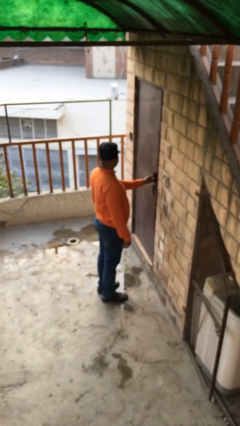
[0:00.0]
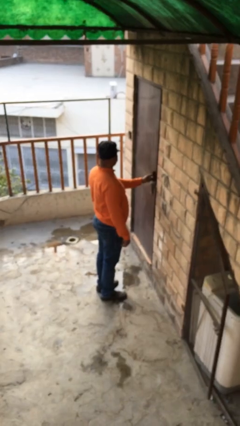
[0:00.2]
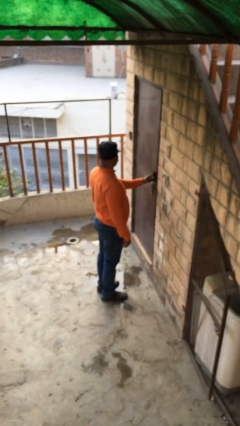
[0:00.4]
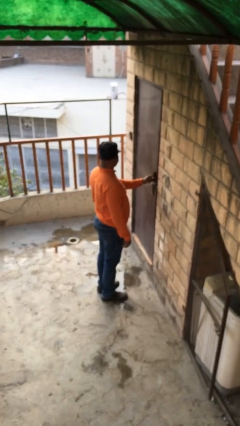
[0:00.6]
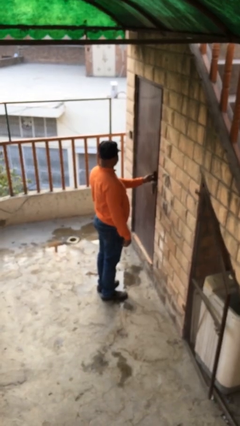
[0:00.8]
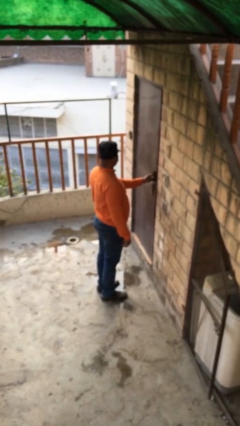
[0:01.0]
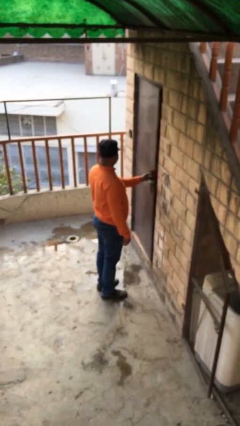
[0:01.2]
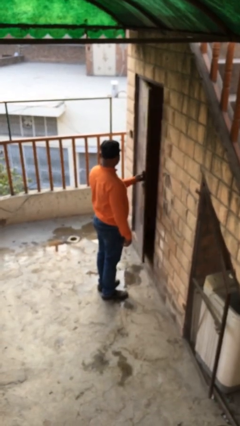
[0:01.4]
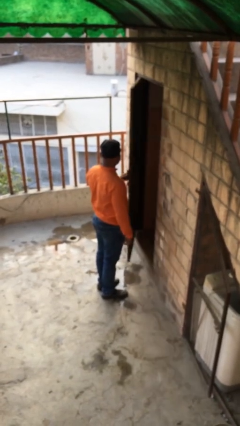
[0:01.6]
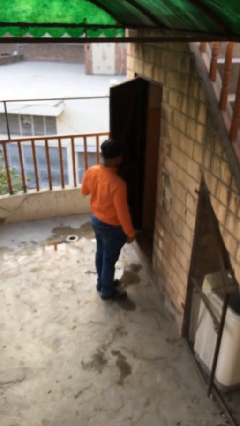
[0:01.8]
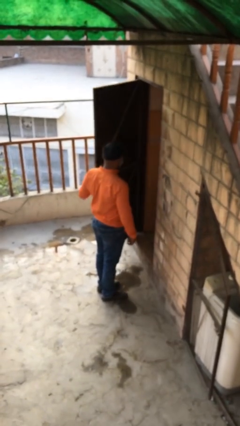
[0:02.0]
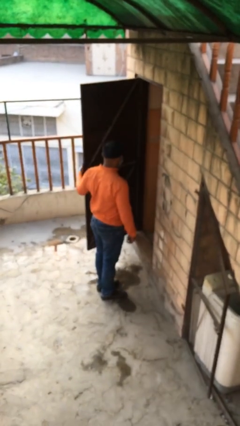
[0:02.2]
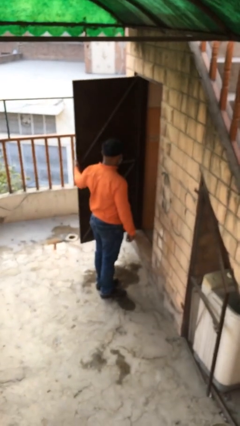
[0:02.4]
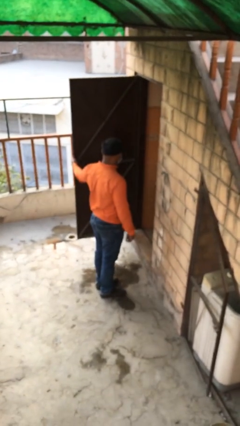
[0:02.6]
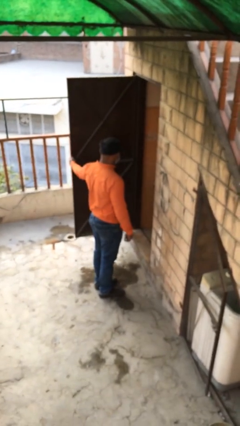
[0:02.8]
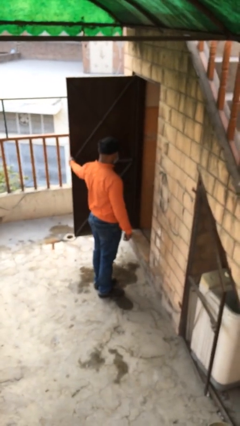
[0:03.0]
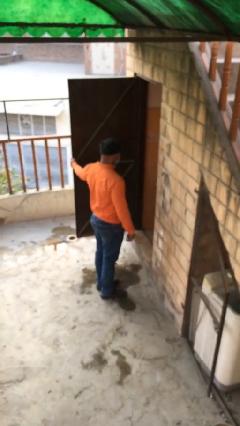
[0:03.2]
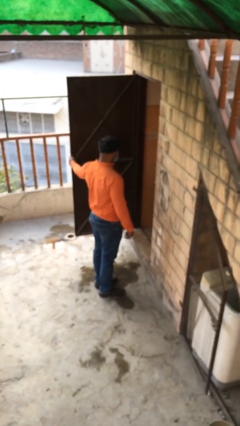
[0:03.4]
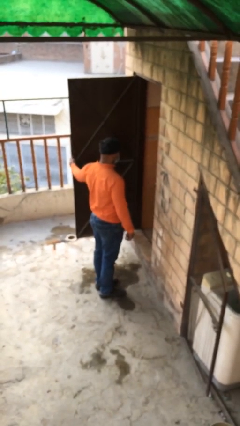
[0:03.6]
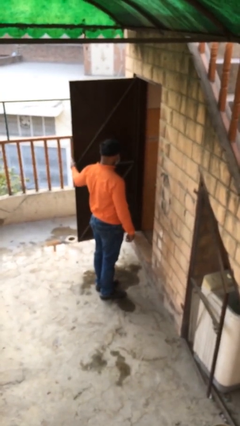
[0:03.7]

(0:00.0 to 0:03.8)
person opens facility door

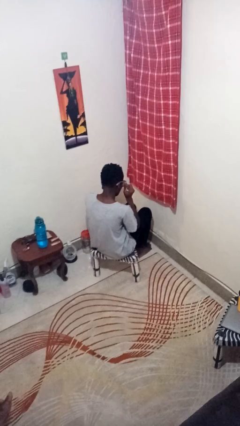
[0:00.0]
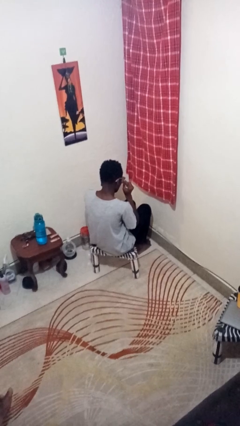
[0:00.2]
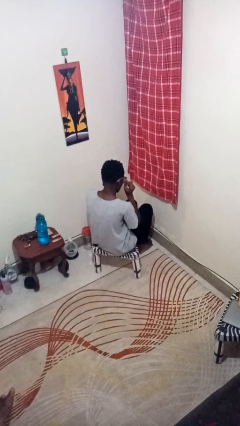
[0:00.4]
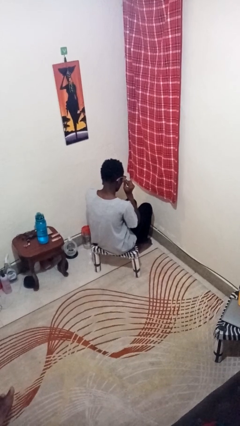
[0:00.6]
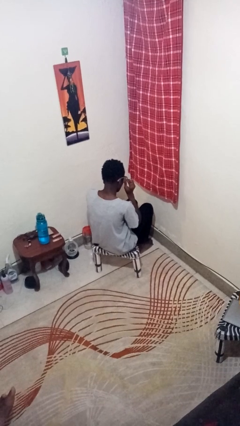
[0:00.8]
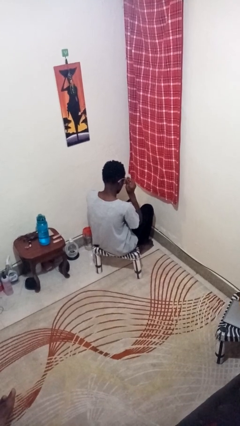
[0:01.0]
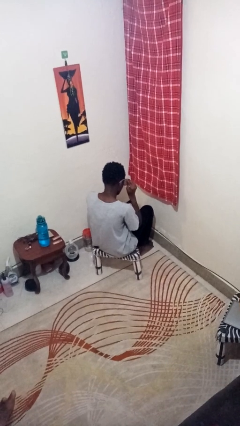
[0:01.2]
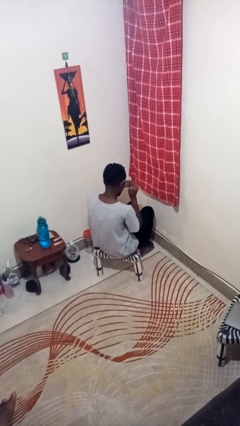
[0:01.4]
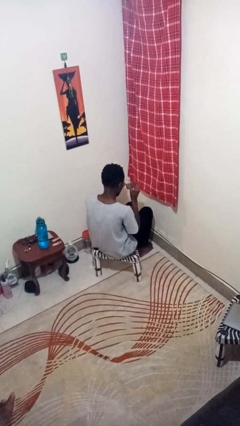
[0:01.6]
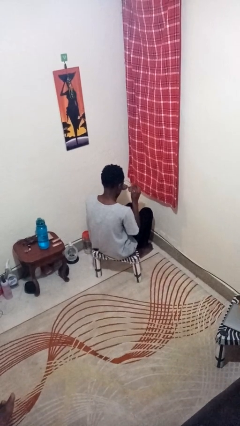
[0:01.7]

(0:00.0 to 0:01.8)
person takes off glasses

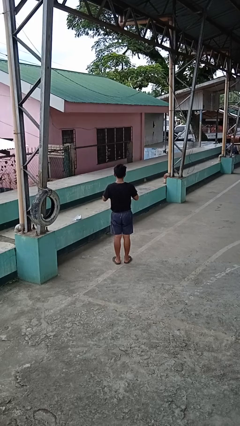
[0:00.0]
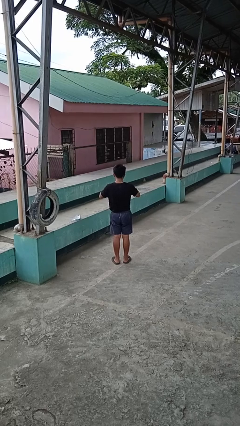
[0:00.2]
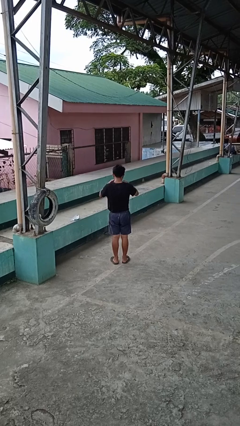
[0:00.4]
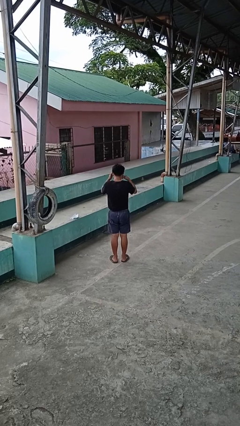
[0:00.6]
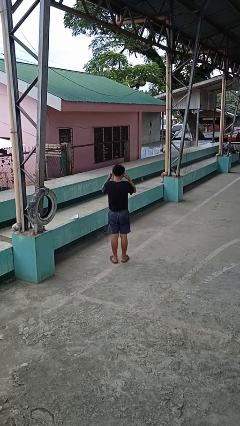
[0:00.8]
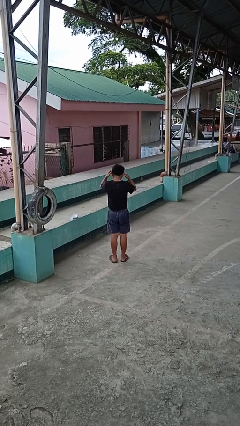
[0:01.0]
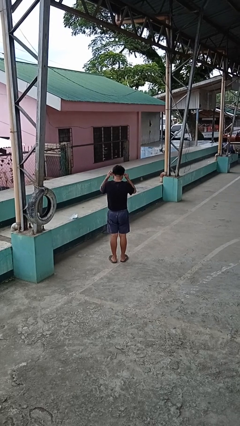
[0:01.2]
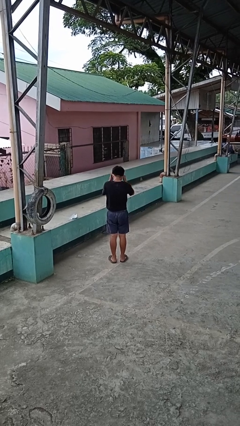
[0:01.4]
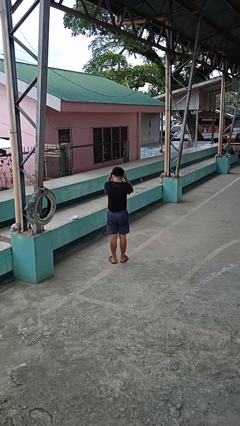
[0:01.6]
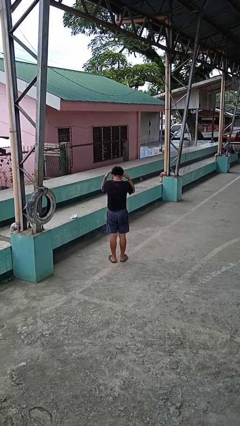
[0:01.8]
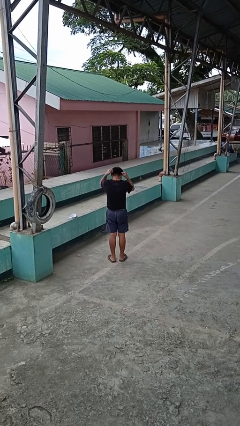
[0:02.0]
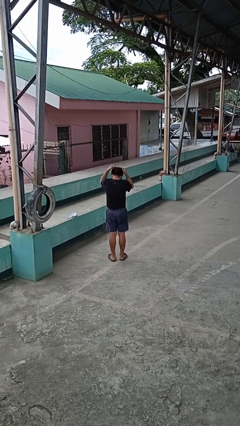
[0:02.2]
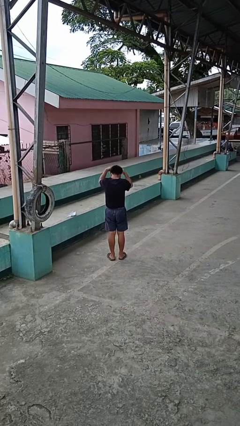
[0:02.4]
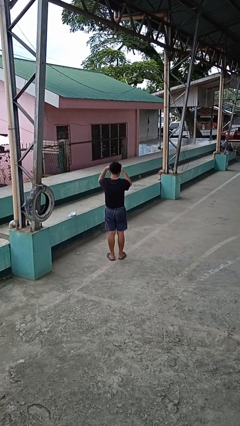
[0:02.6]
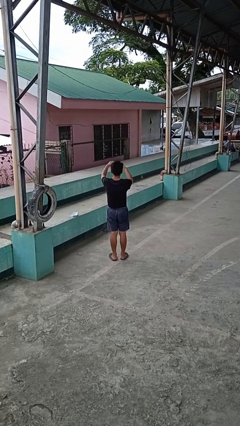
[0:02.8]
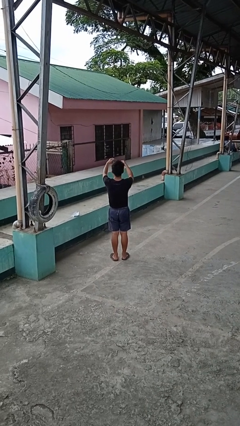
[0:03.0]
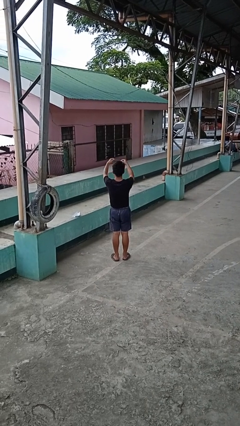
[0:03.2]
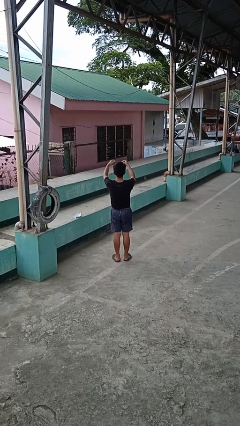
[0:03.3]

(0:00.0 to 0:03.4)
person takes off necklace

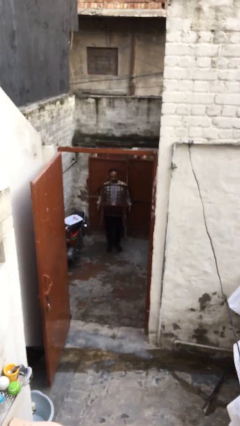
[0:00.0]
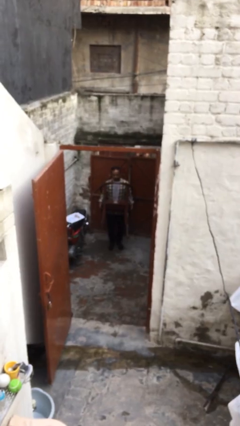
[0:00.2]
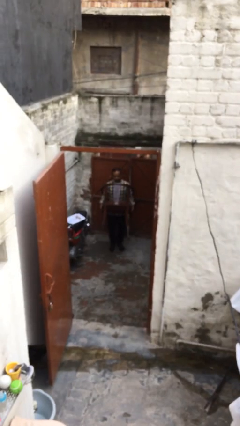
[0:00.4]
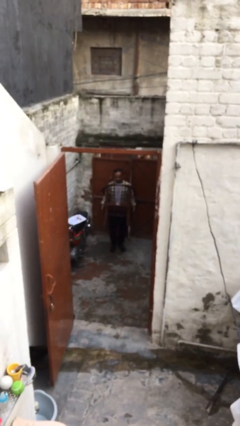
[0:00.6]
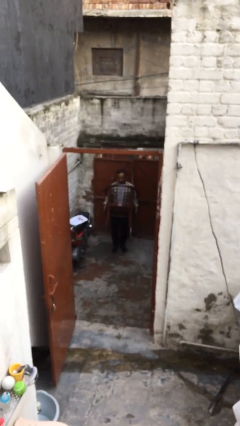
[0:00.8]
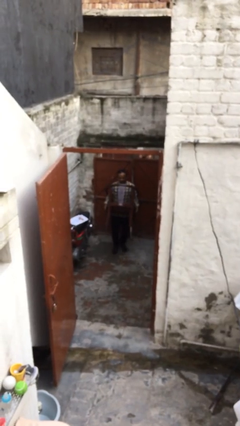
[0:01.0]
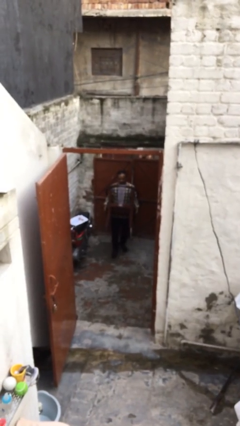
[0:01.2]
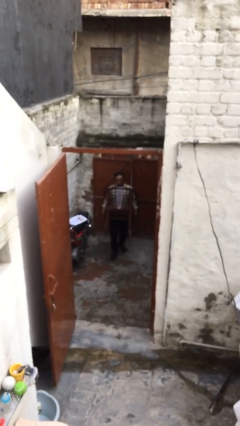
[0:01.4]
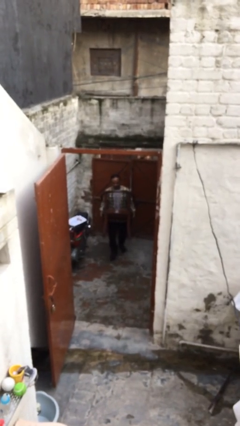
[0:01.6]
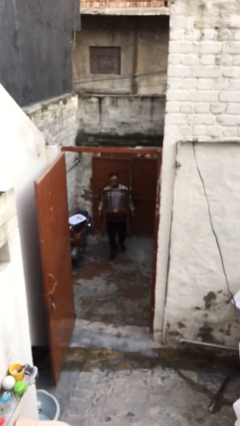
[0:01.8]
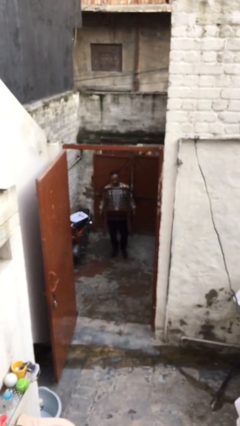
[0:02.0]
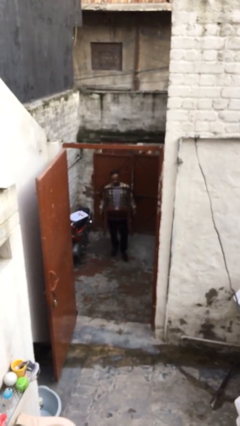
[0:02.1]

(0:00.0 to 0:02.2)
person carries heavy object

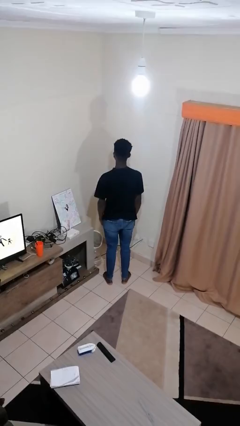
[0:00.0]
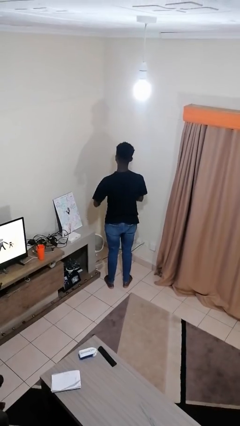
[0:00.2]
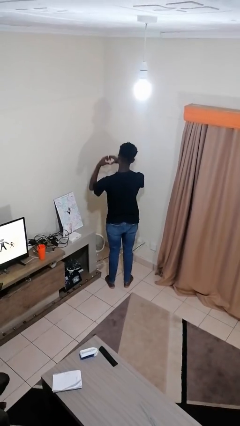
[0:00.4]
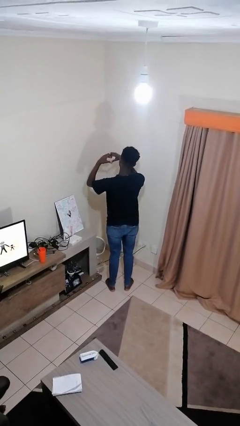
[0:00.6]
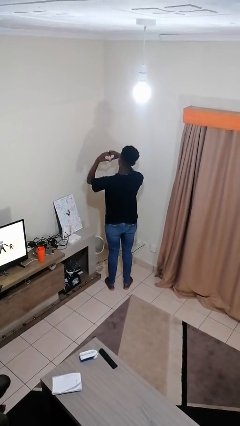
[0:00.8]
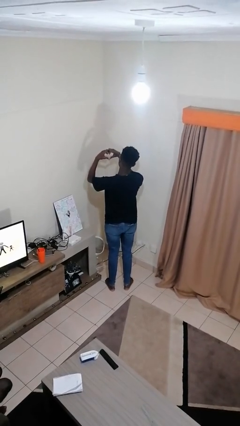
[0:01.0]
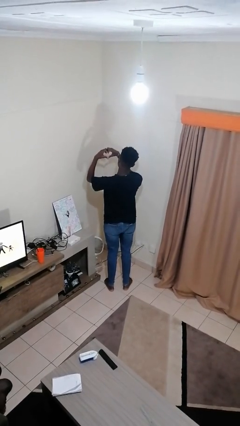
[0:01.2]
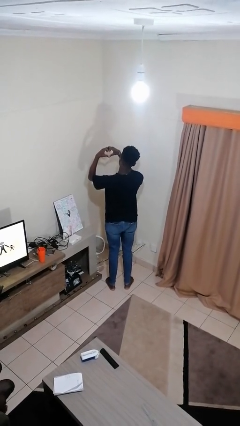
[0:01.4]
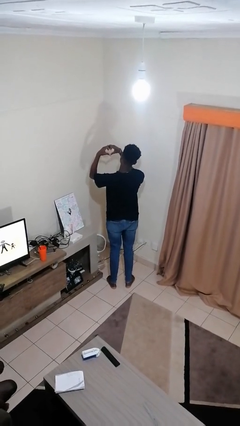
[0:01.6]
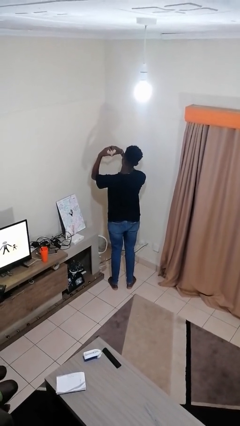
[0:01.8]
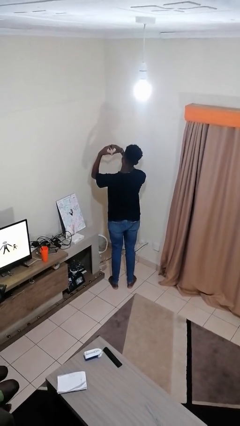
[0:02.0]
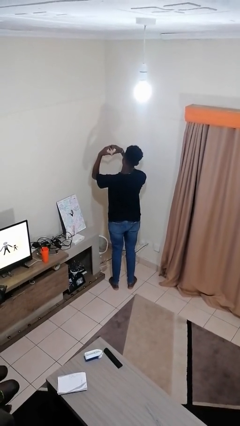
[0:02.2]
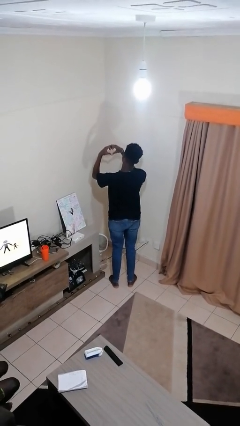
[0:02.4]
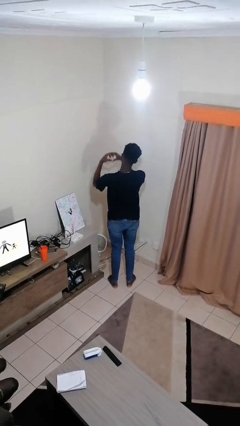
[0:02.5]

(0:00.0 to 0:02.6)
person gestures heart

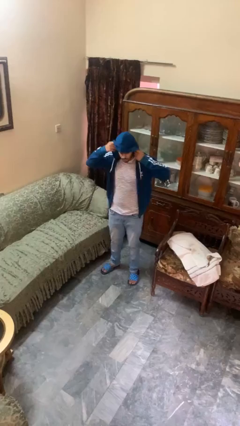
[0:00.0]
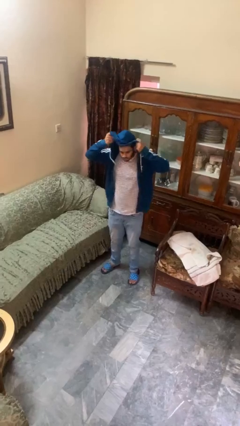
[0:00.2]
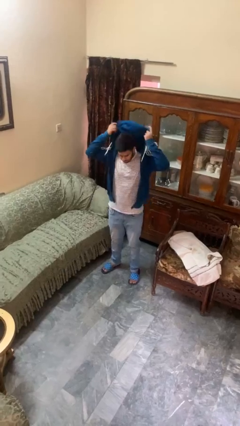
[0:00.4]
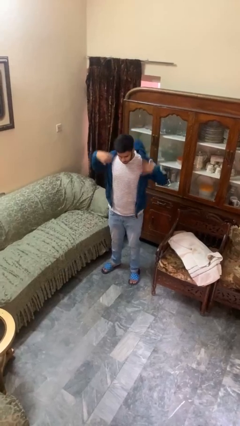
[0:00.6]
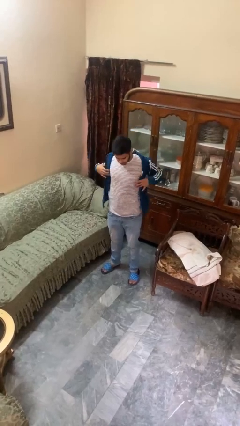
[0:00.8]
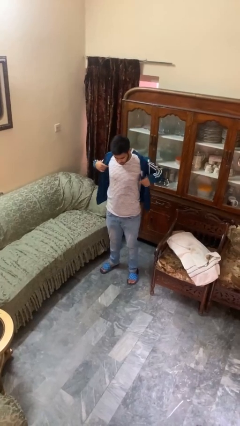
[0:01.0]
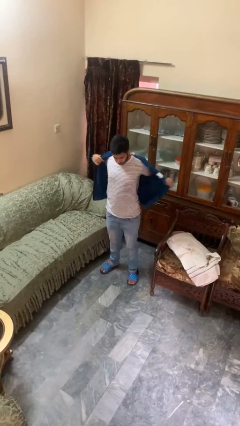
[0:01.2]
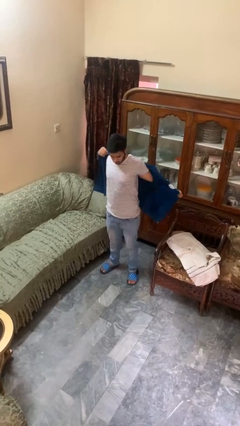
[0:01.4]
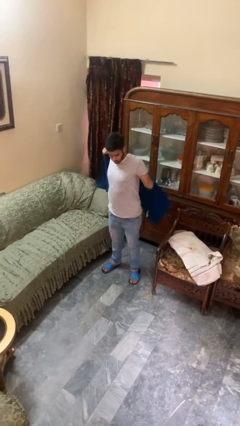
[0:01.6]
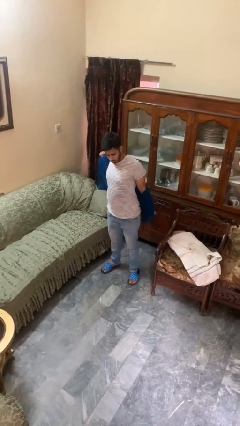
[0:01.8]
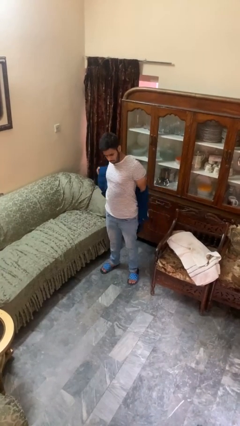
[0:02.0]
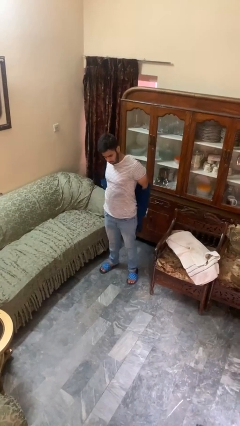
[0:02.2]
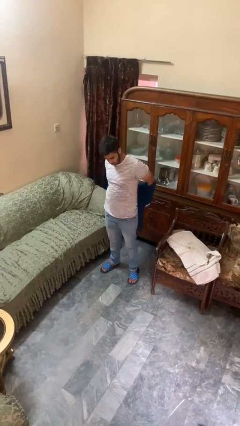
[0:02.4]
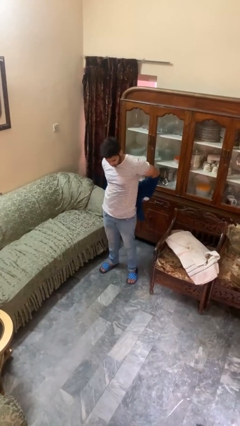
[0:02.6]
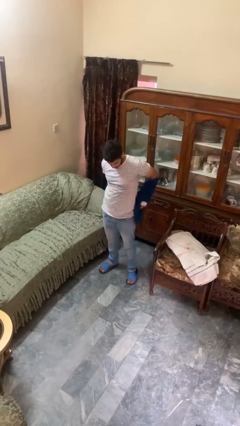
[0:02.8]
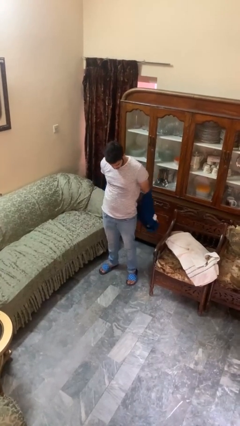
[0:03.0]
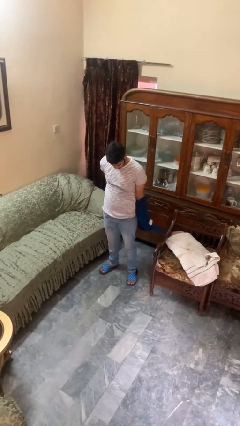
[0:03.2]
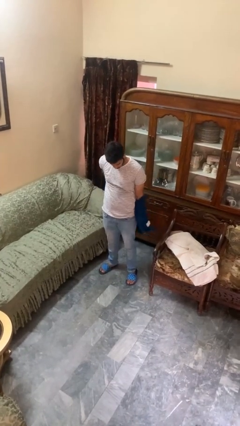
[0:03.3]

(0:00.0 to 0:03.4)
person takes off hoodie
